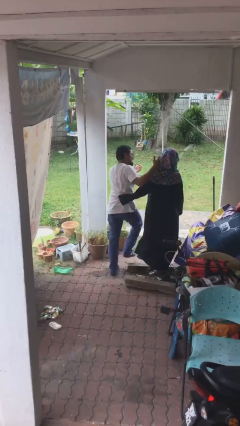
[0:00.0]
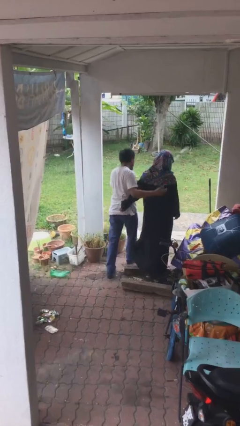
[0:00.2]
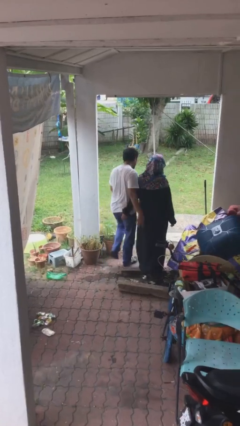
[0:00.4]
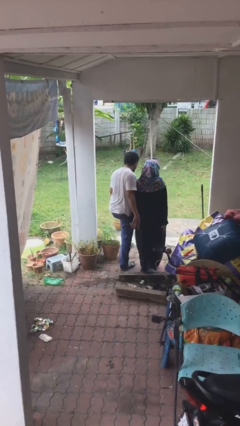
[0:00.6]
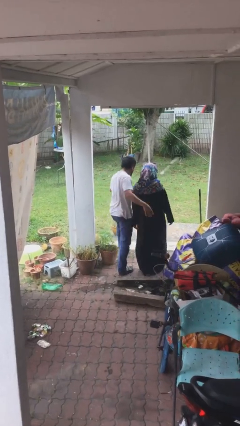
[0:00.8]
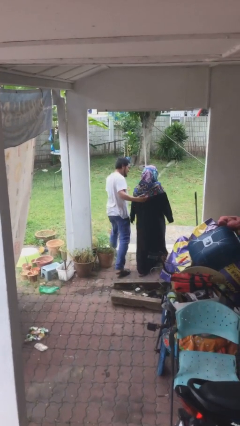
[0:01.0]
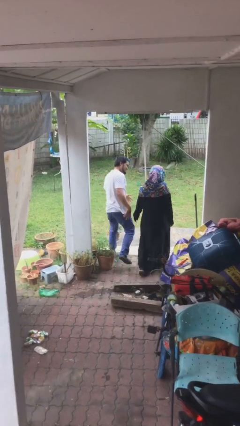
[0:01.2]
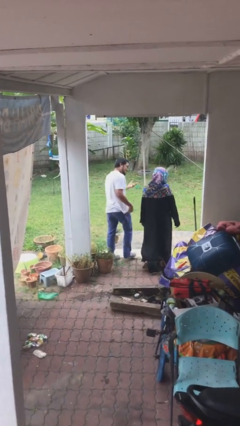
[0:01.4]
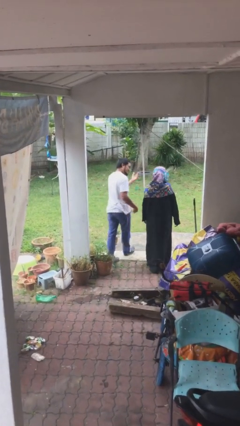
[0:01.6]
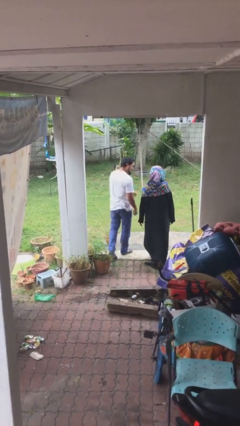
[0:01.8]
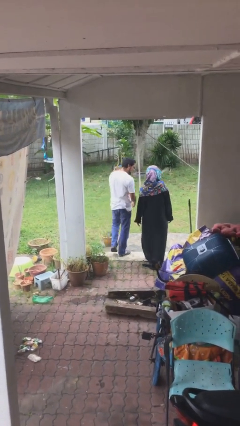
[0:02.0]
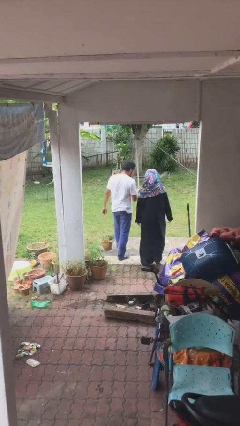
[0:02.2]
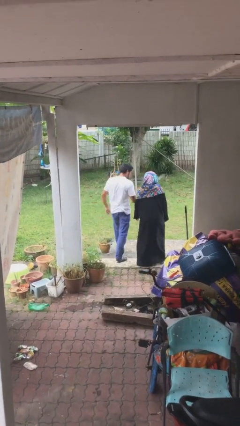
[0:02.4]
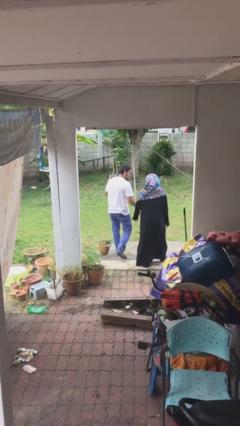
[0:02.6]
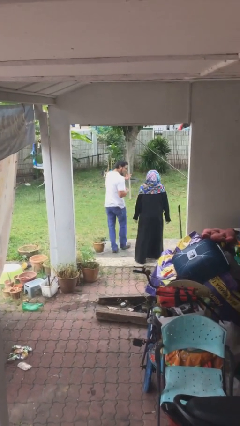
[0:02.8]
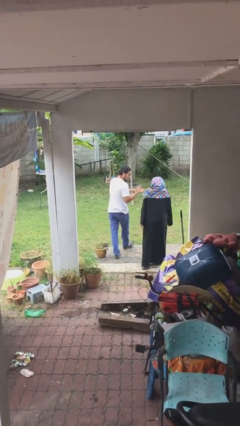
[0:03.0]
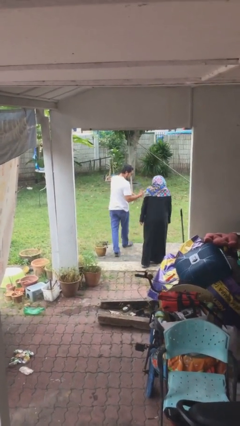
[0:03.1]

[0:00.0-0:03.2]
person talks to person

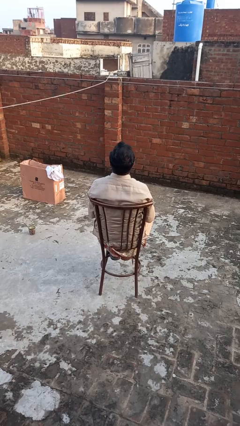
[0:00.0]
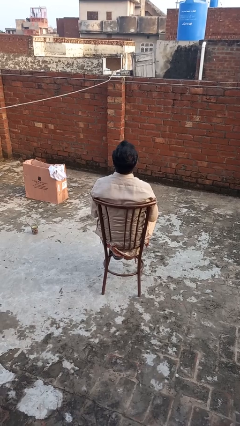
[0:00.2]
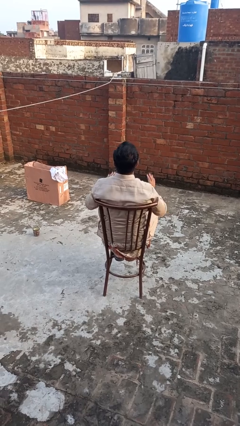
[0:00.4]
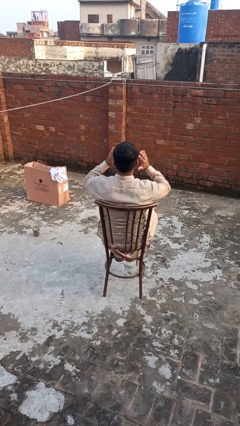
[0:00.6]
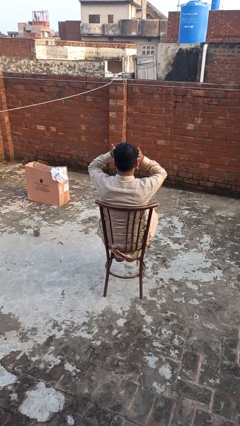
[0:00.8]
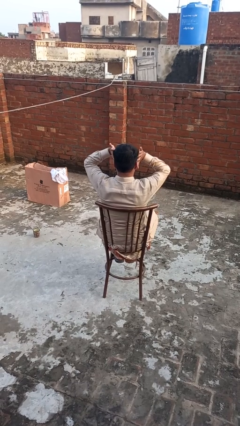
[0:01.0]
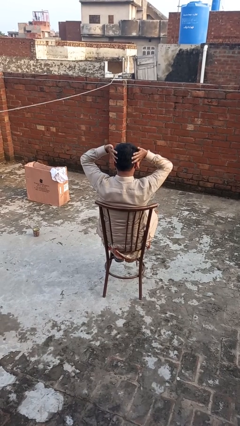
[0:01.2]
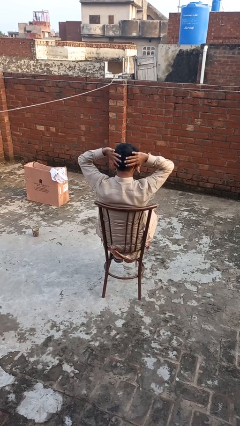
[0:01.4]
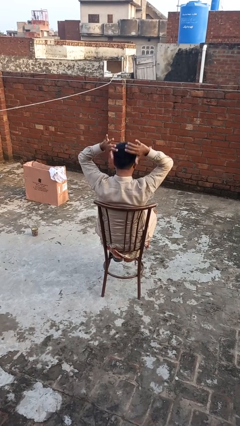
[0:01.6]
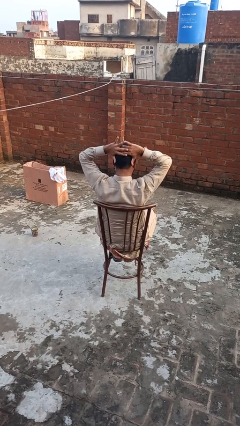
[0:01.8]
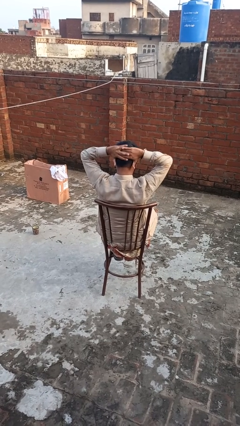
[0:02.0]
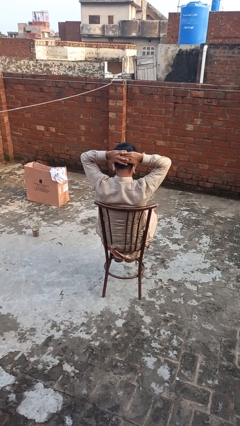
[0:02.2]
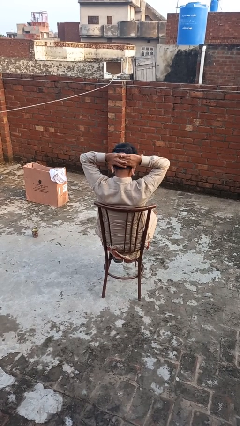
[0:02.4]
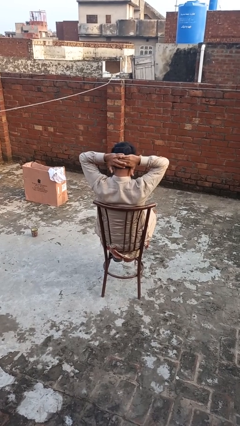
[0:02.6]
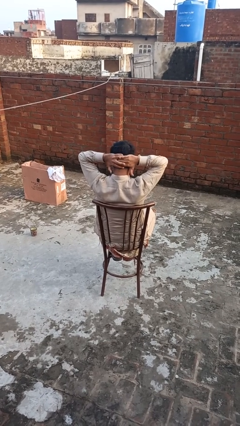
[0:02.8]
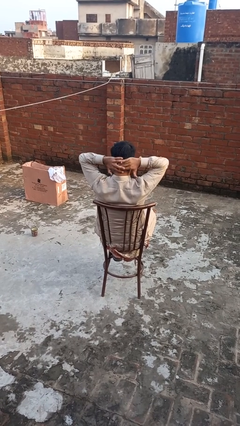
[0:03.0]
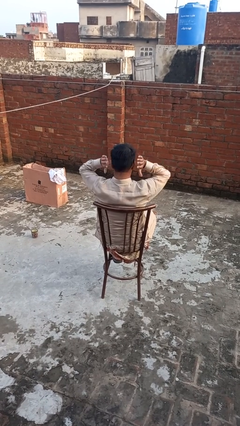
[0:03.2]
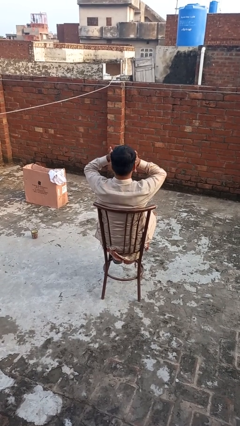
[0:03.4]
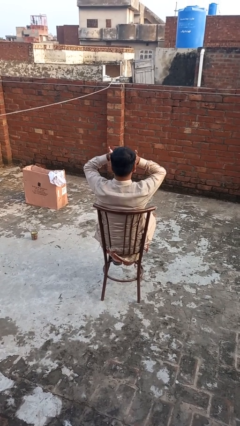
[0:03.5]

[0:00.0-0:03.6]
person strokes hair

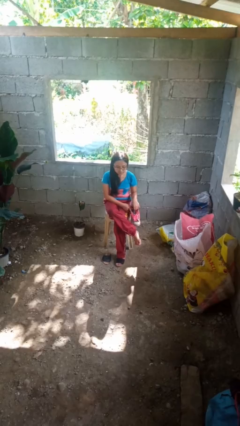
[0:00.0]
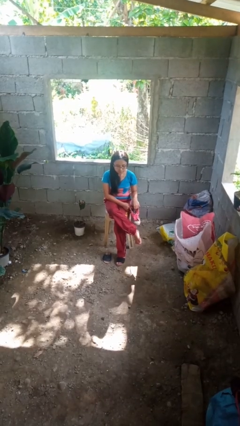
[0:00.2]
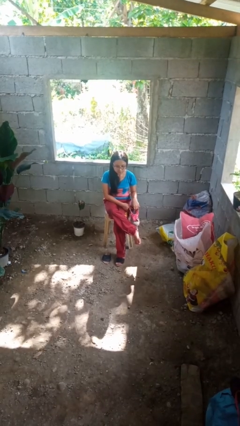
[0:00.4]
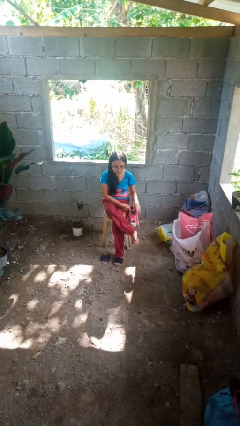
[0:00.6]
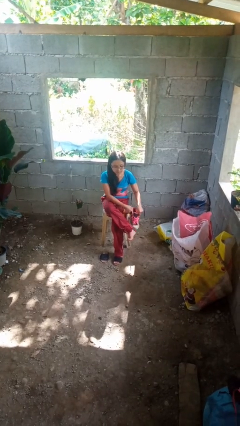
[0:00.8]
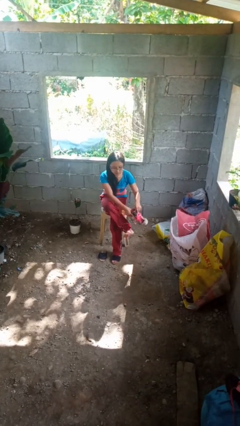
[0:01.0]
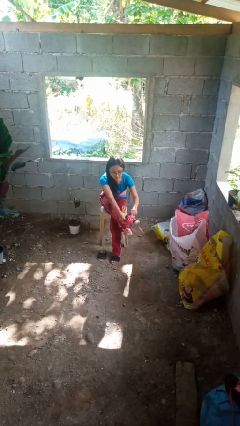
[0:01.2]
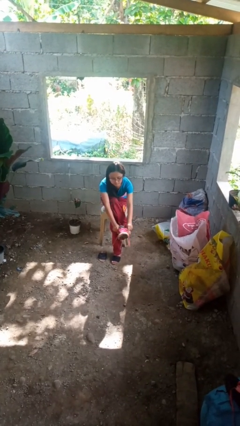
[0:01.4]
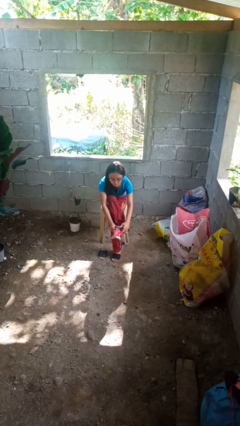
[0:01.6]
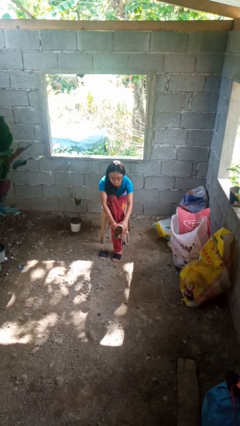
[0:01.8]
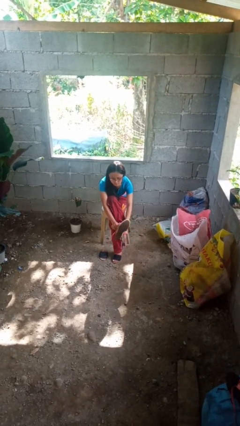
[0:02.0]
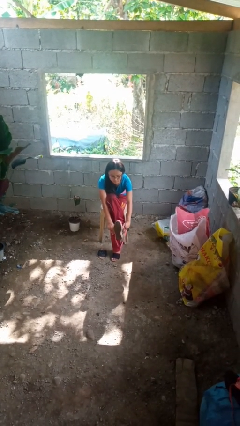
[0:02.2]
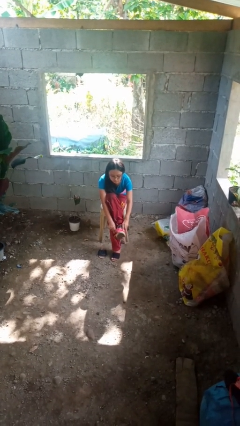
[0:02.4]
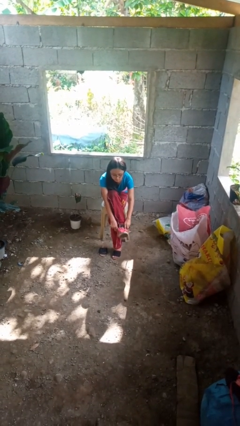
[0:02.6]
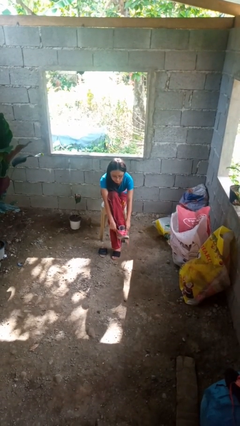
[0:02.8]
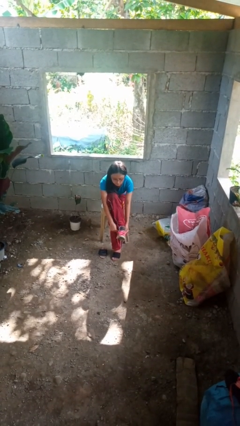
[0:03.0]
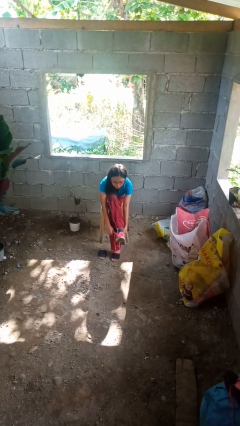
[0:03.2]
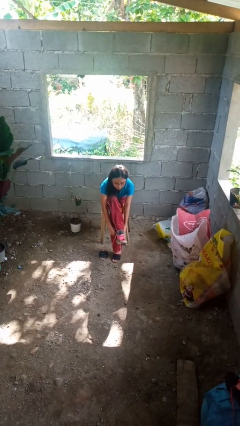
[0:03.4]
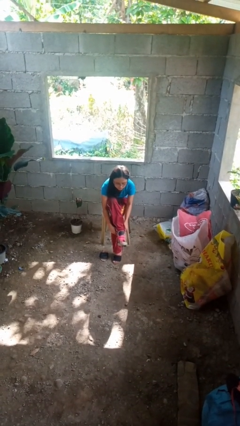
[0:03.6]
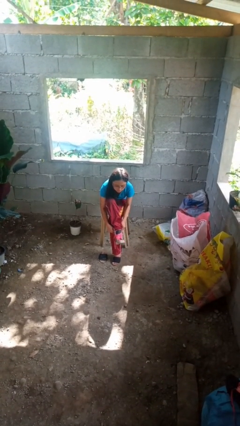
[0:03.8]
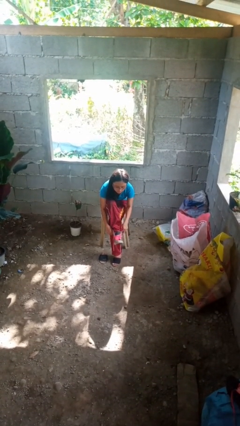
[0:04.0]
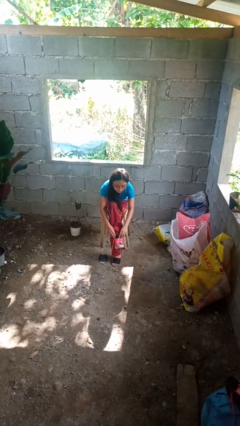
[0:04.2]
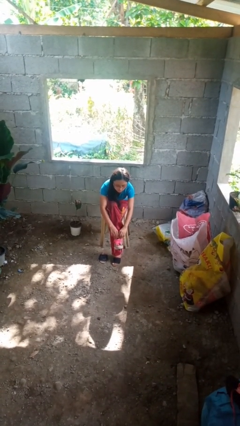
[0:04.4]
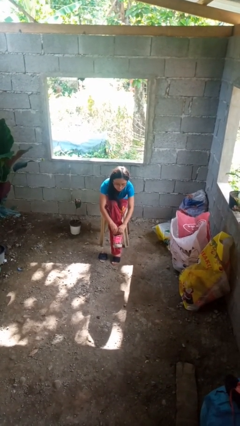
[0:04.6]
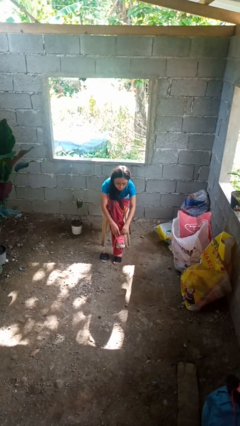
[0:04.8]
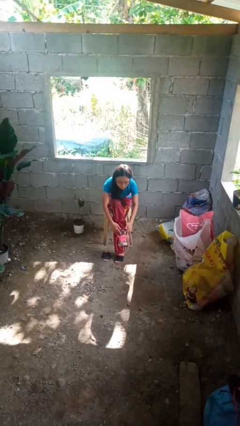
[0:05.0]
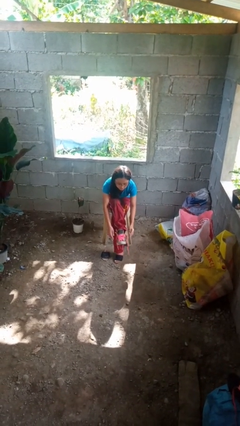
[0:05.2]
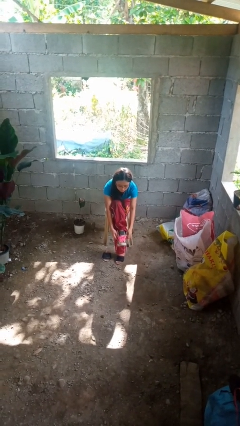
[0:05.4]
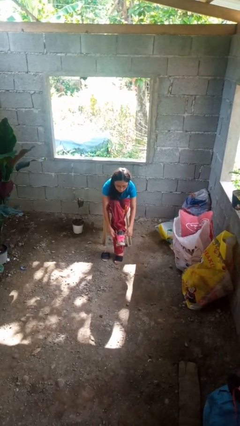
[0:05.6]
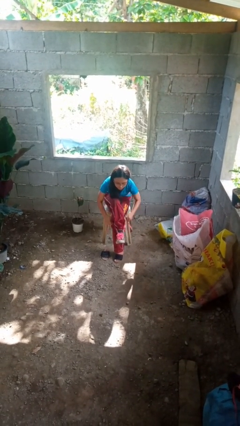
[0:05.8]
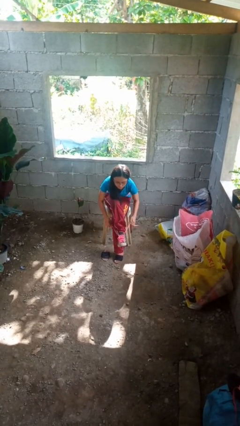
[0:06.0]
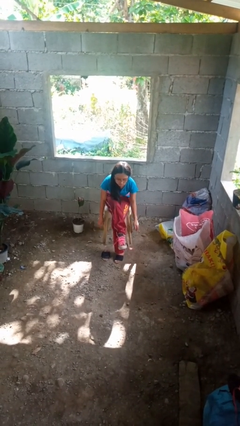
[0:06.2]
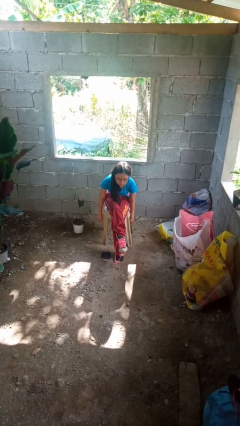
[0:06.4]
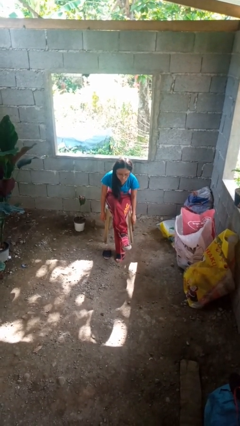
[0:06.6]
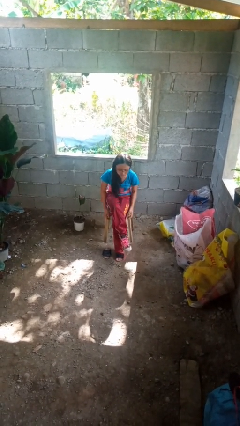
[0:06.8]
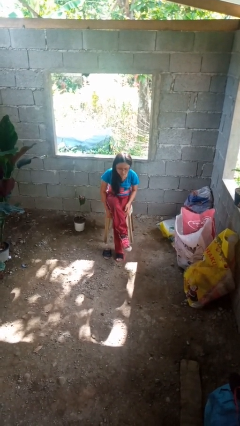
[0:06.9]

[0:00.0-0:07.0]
person puts on shoes

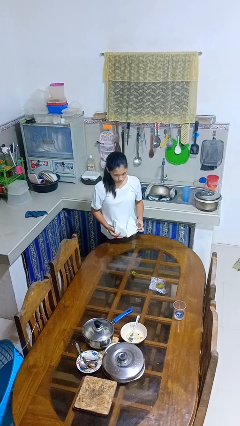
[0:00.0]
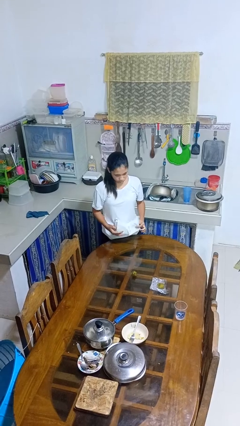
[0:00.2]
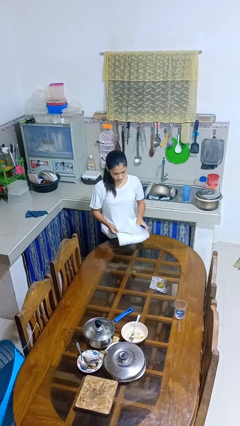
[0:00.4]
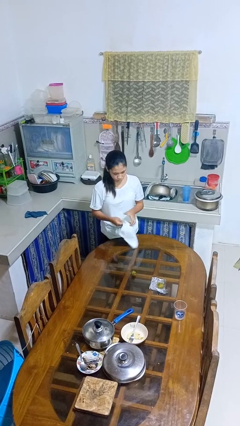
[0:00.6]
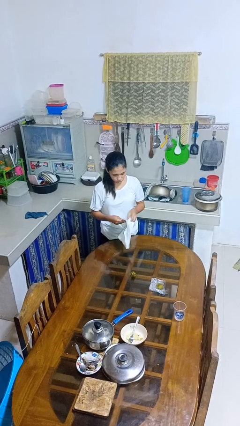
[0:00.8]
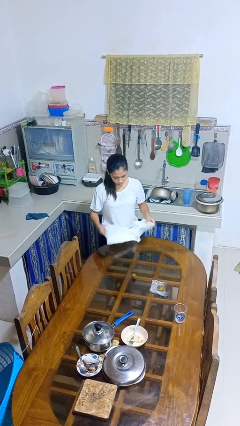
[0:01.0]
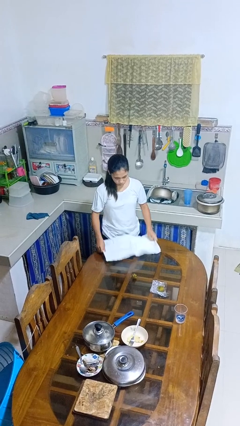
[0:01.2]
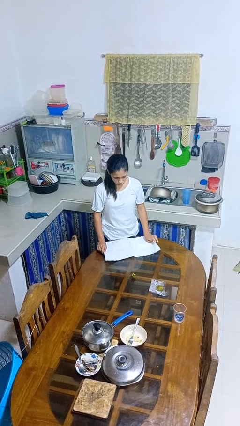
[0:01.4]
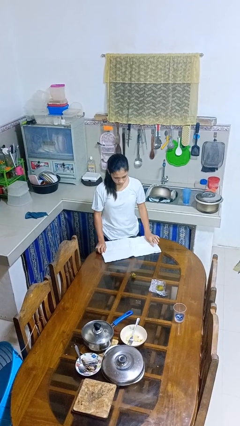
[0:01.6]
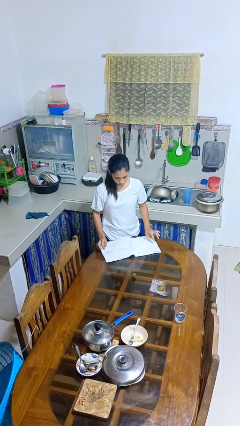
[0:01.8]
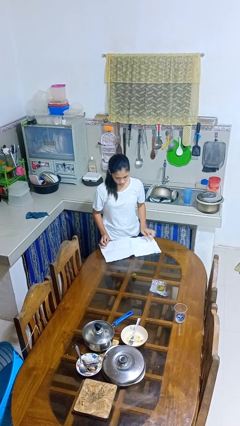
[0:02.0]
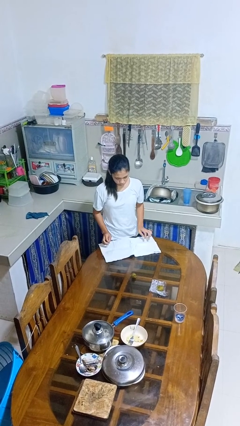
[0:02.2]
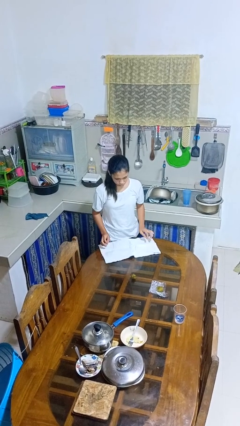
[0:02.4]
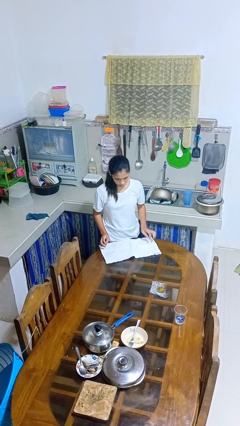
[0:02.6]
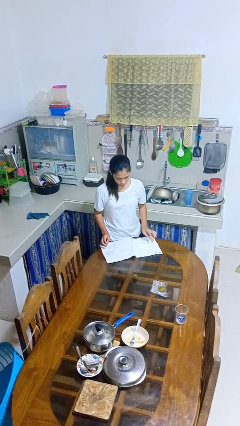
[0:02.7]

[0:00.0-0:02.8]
person spreads tablecloth

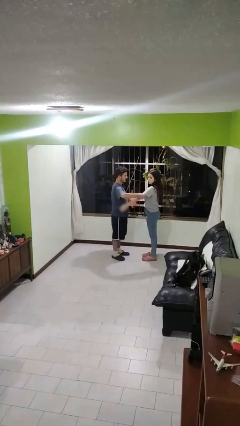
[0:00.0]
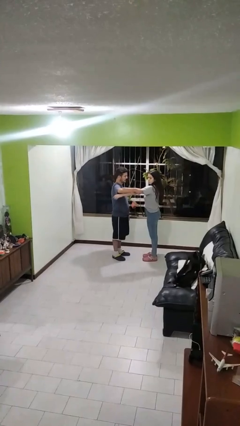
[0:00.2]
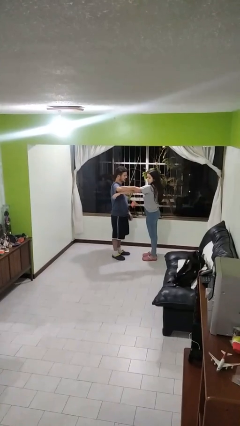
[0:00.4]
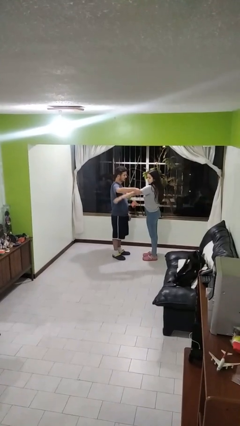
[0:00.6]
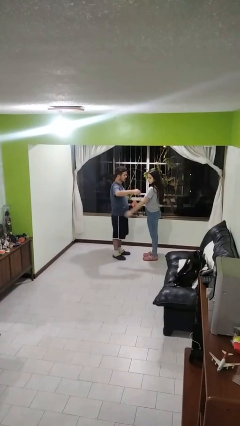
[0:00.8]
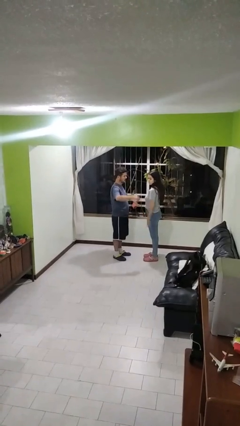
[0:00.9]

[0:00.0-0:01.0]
person grabs person by bicep
